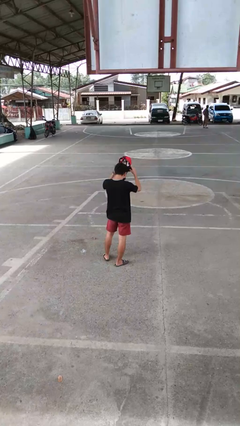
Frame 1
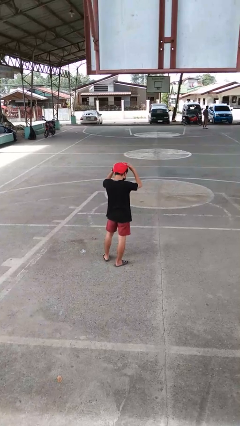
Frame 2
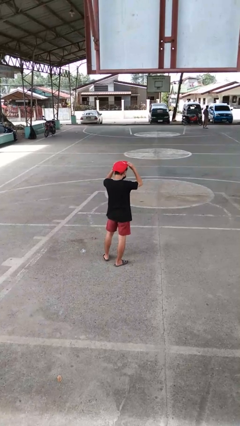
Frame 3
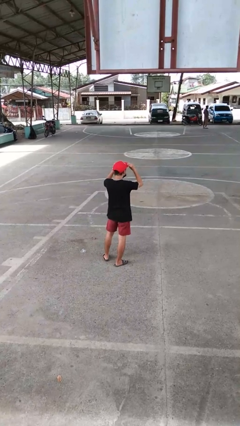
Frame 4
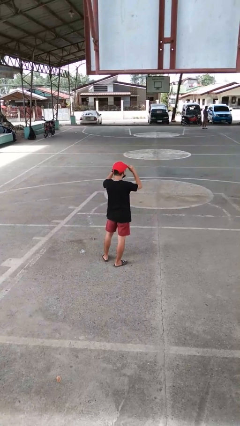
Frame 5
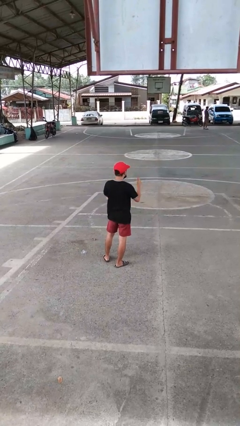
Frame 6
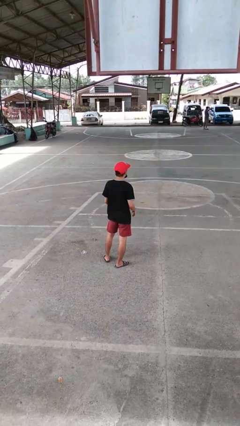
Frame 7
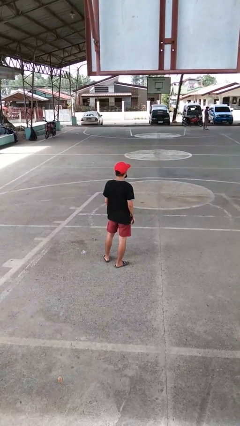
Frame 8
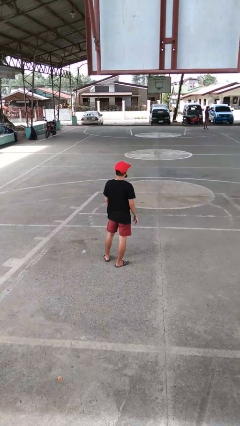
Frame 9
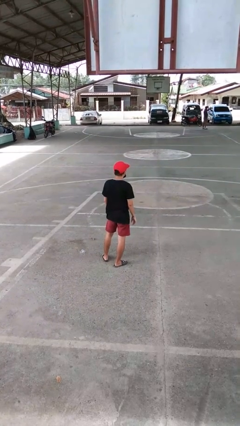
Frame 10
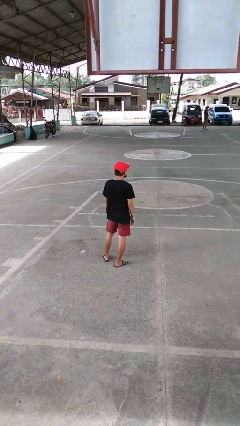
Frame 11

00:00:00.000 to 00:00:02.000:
person puts on hat

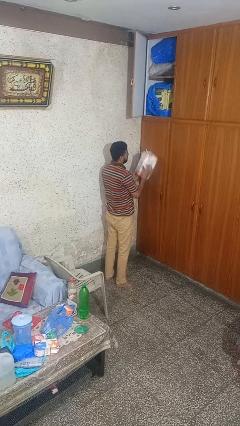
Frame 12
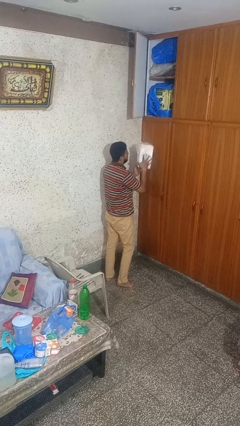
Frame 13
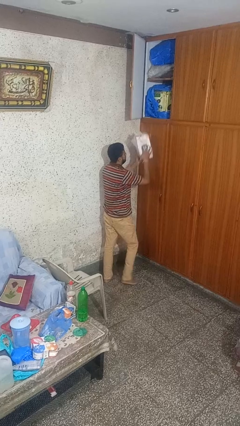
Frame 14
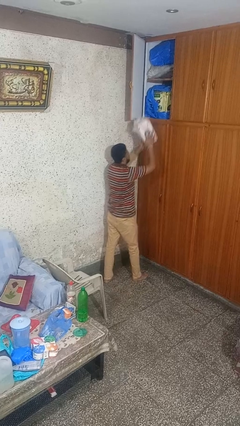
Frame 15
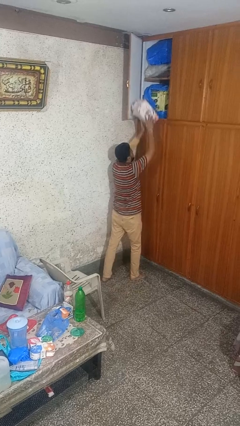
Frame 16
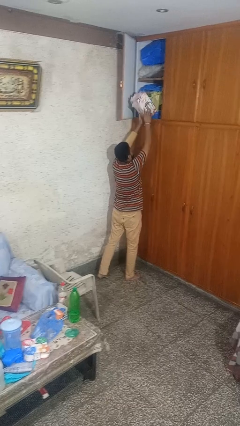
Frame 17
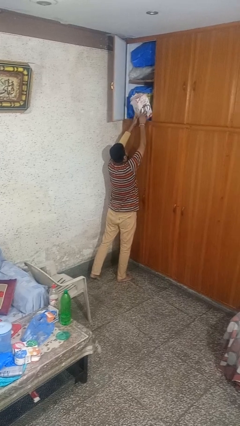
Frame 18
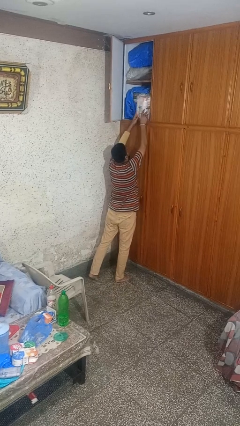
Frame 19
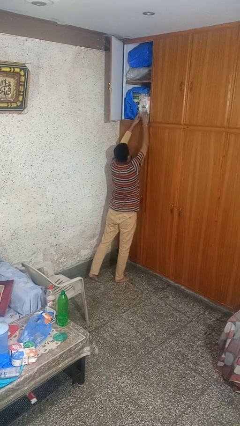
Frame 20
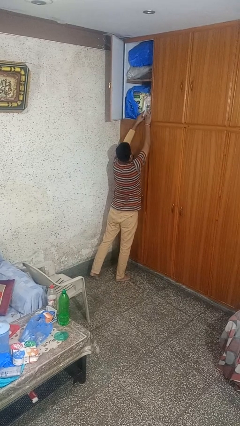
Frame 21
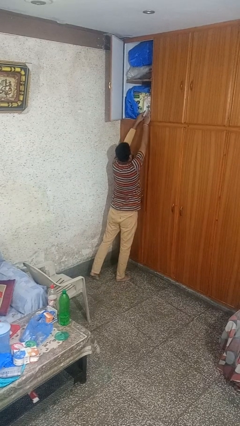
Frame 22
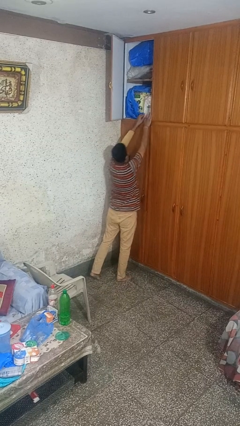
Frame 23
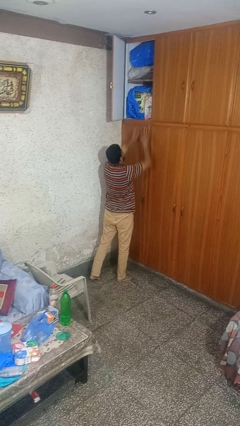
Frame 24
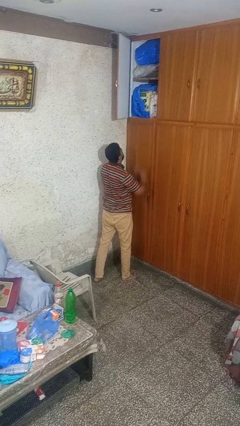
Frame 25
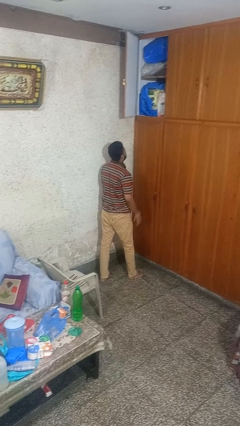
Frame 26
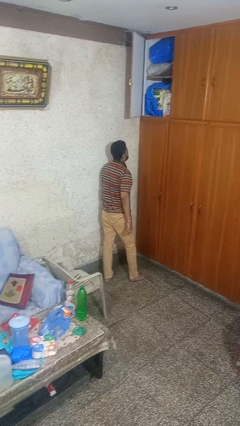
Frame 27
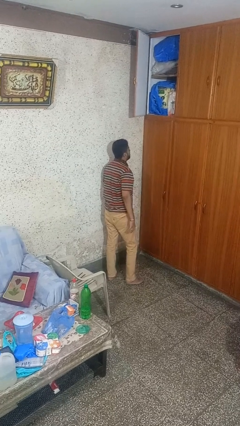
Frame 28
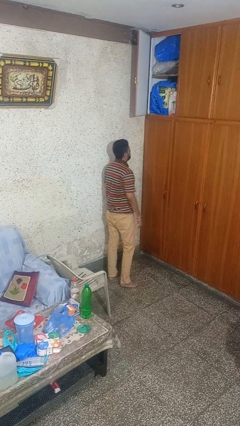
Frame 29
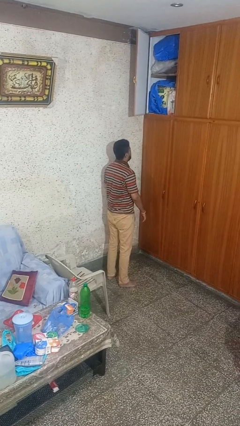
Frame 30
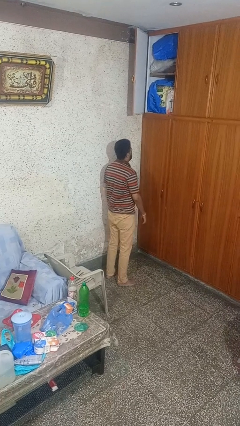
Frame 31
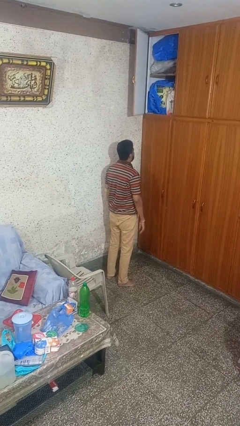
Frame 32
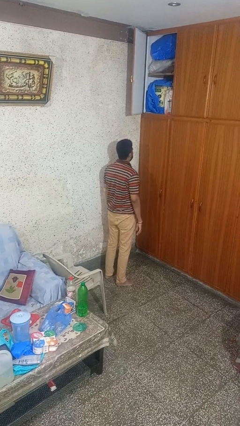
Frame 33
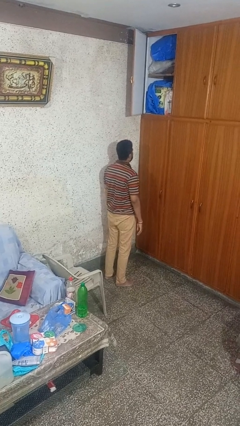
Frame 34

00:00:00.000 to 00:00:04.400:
person puts down object on countertop

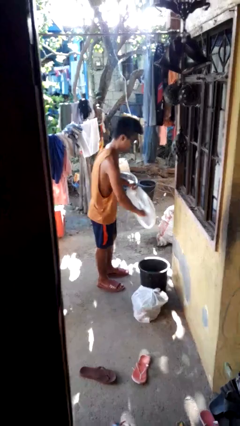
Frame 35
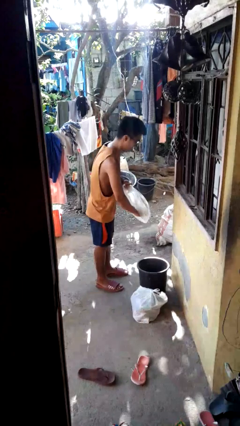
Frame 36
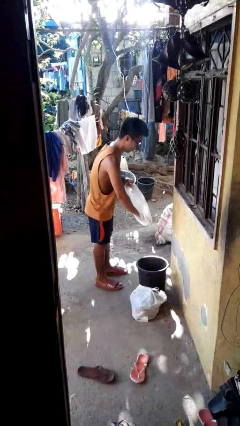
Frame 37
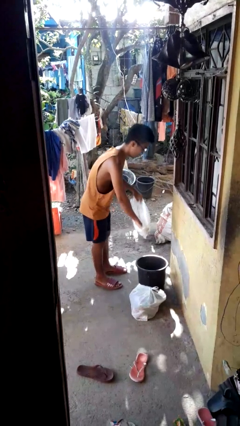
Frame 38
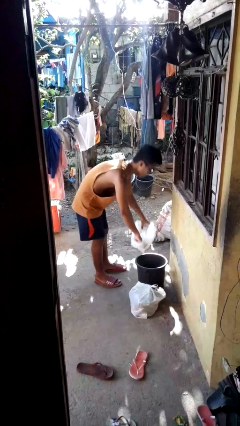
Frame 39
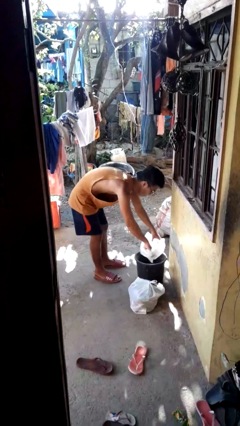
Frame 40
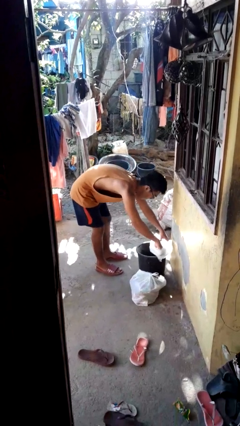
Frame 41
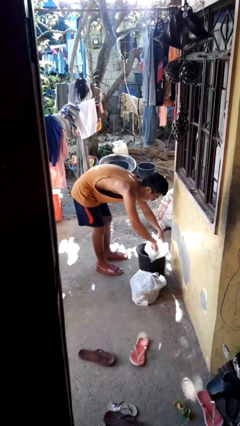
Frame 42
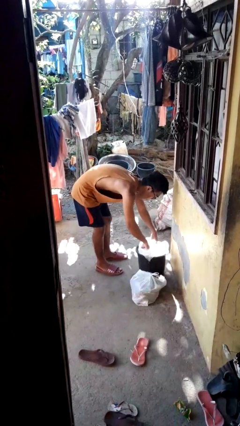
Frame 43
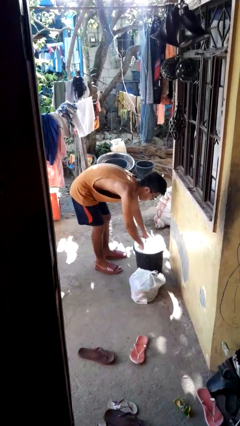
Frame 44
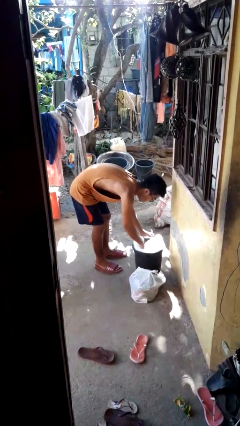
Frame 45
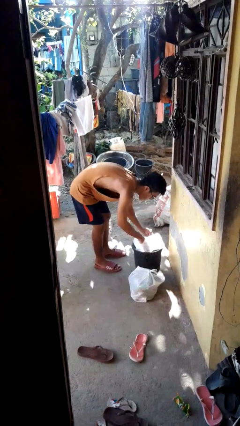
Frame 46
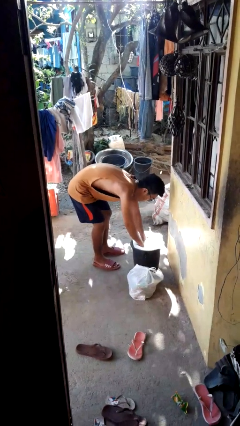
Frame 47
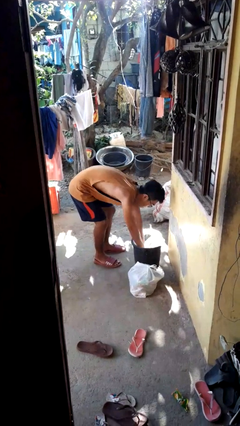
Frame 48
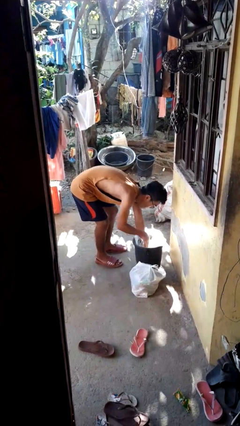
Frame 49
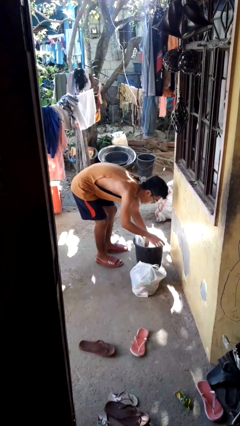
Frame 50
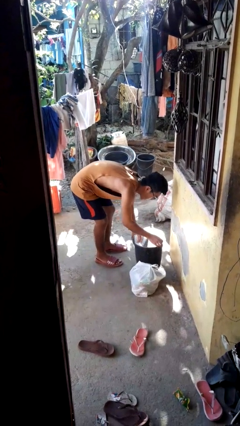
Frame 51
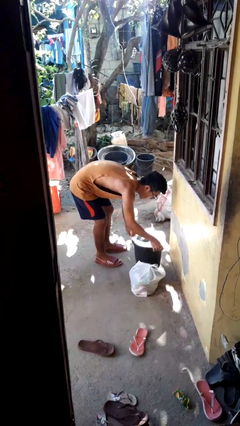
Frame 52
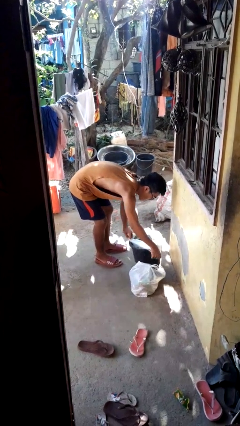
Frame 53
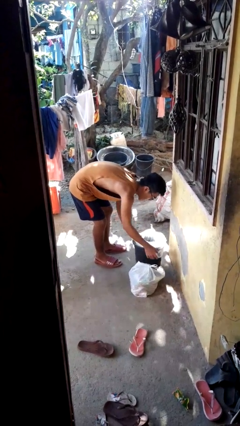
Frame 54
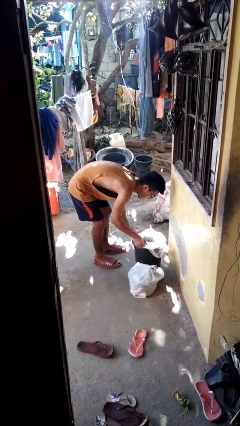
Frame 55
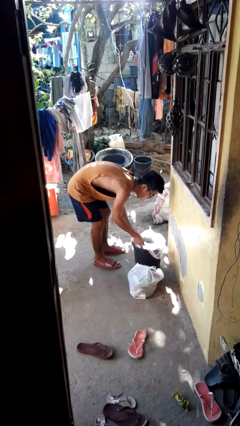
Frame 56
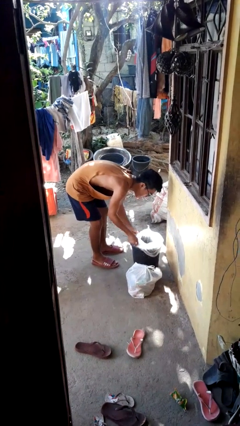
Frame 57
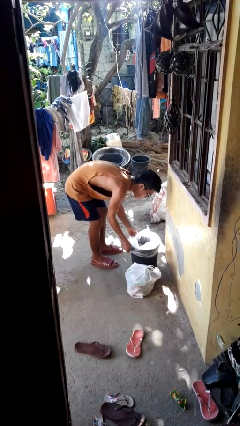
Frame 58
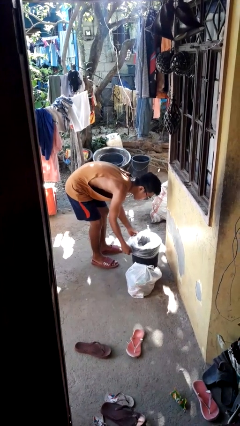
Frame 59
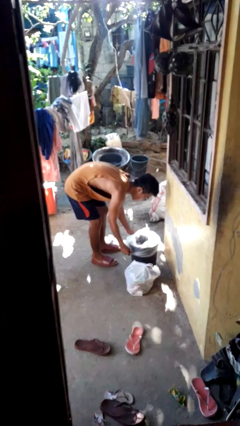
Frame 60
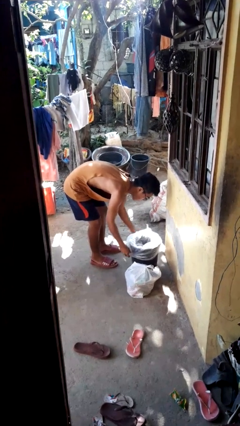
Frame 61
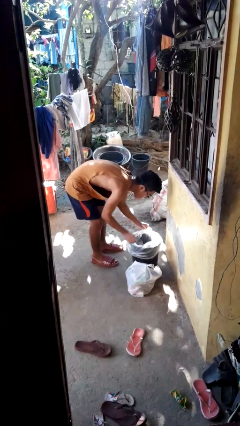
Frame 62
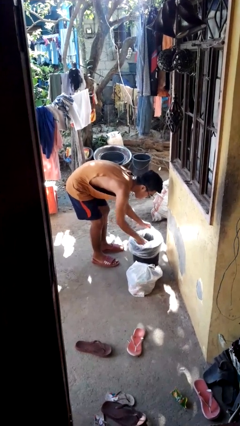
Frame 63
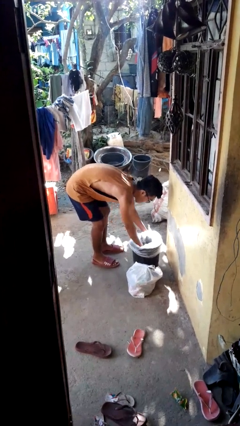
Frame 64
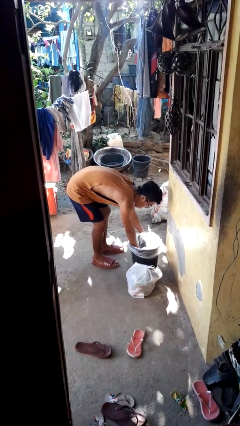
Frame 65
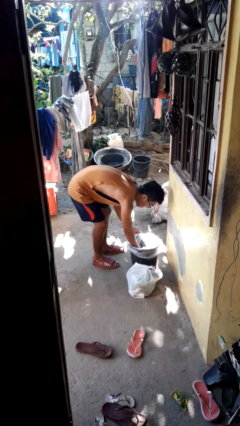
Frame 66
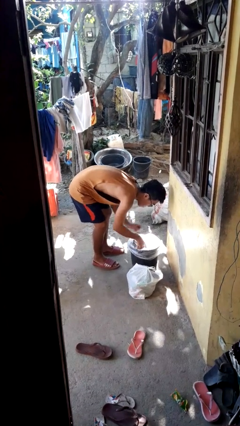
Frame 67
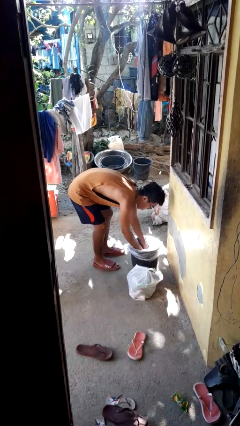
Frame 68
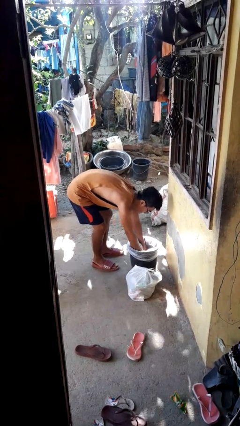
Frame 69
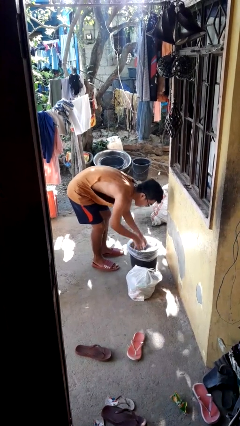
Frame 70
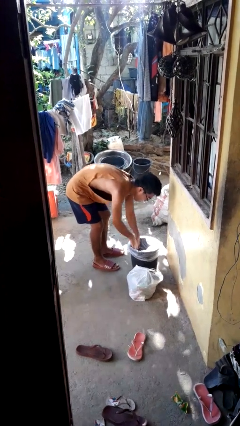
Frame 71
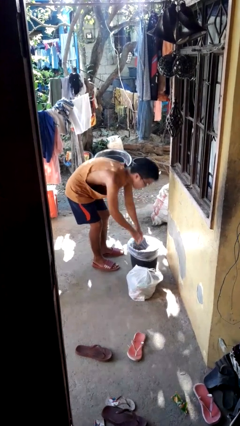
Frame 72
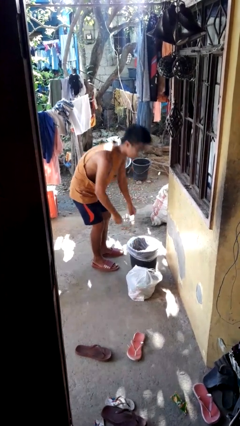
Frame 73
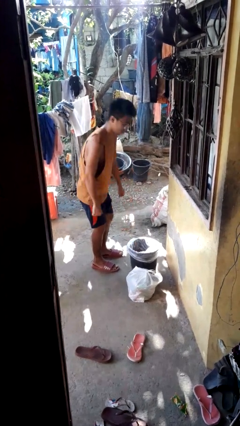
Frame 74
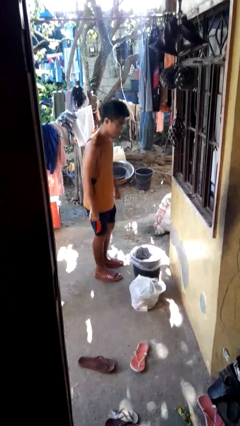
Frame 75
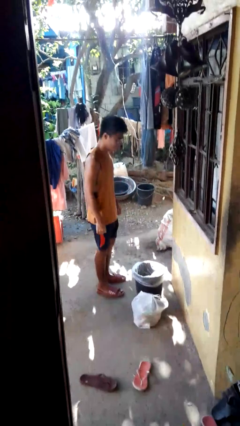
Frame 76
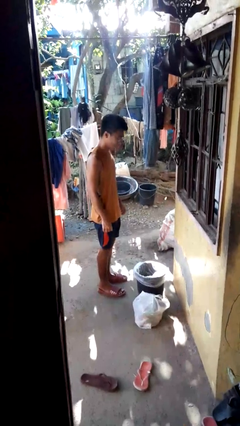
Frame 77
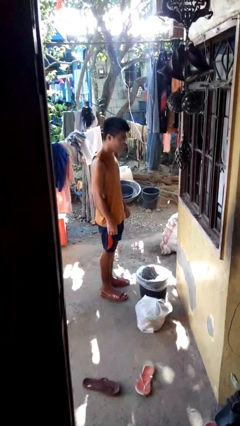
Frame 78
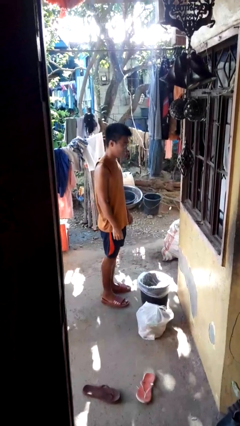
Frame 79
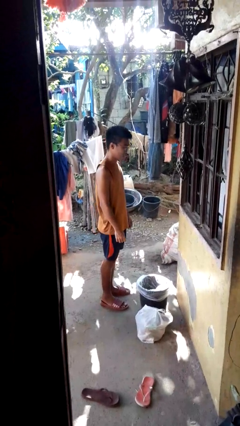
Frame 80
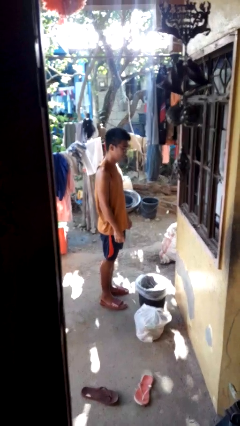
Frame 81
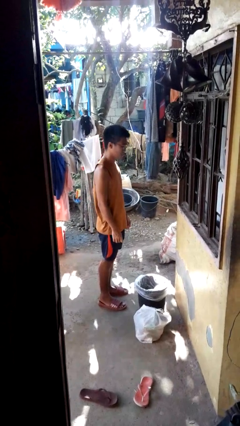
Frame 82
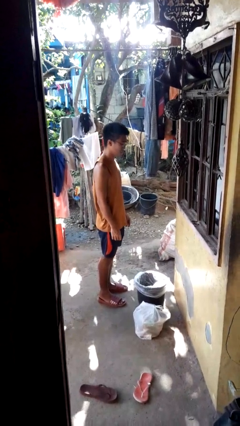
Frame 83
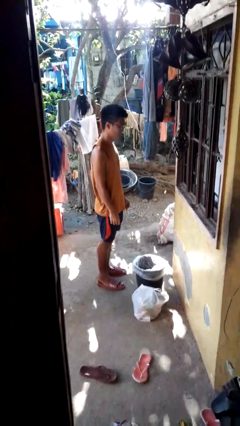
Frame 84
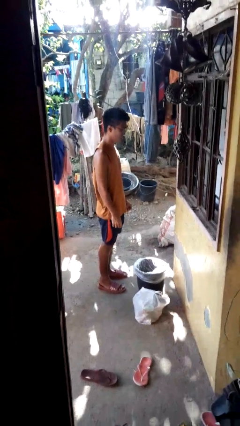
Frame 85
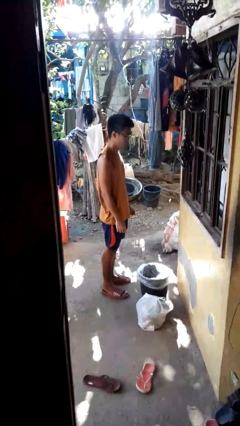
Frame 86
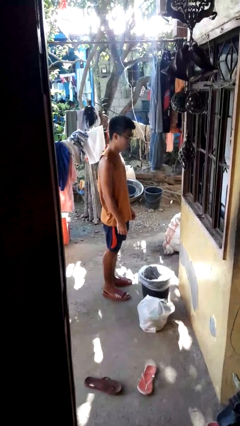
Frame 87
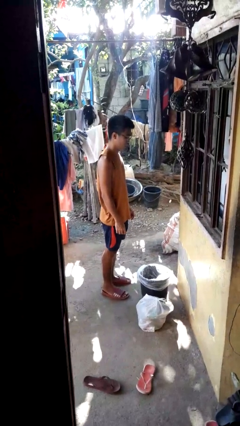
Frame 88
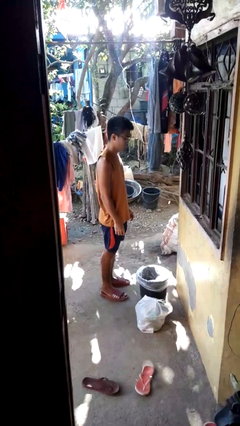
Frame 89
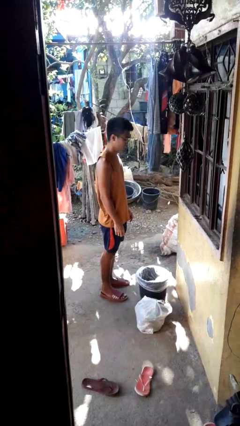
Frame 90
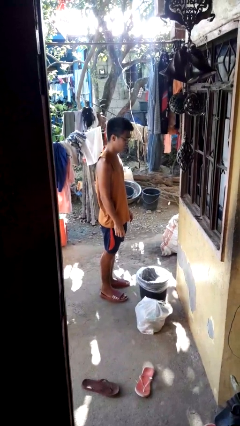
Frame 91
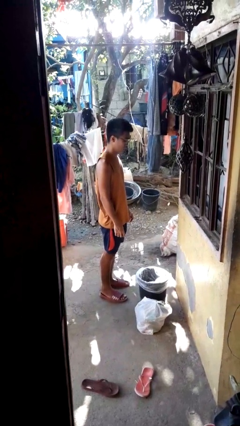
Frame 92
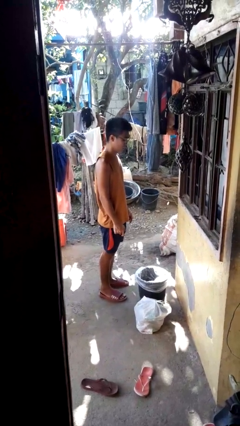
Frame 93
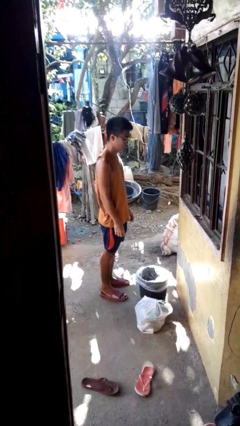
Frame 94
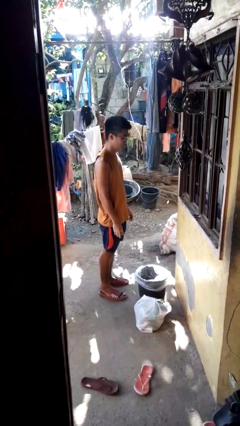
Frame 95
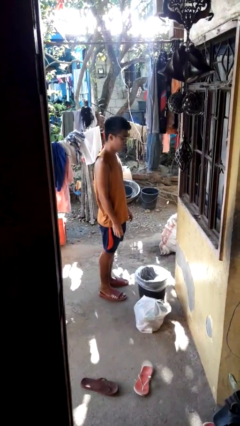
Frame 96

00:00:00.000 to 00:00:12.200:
person inserts trashbag into trashcan
